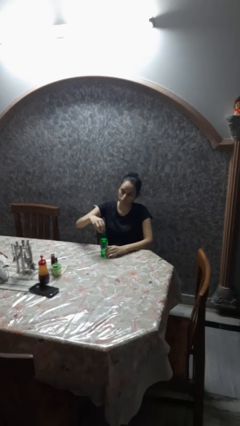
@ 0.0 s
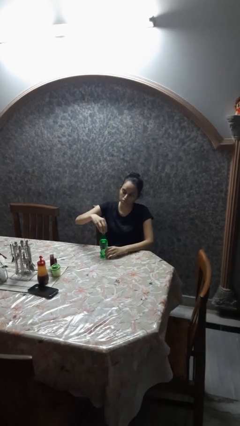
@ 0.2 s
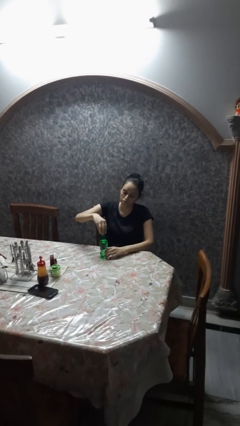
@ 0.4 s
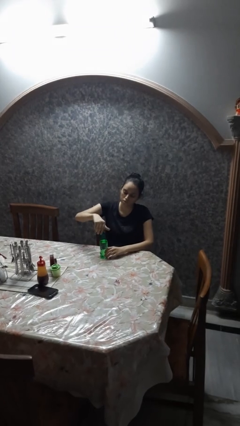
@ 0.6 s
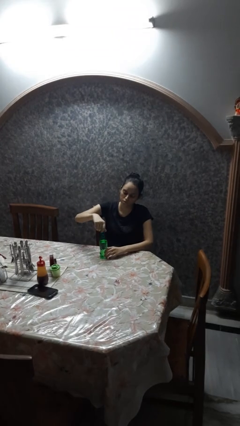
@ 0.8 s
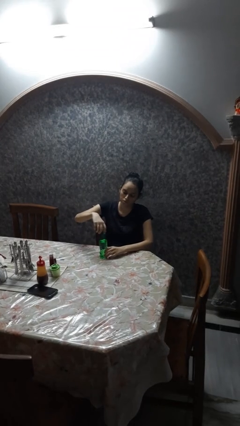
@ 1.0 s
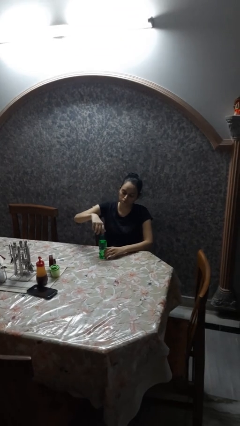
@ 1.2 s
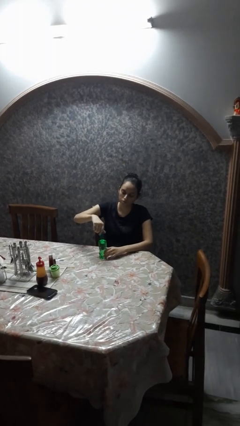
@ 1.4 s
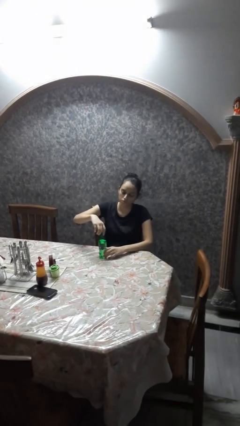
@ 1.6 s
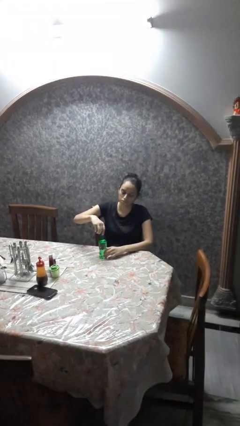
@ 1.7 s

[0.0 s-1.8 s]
person screws lid to bottle

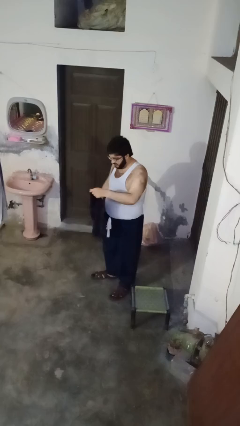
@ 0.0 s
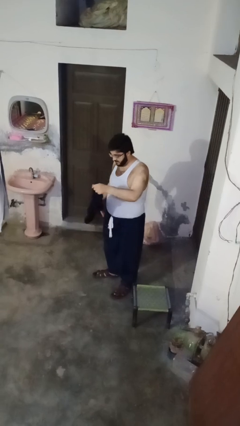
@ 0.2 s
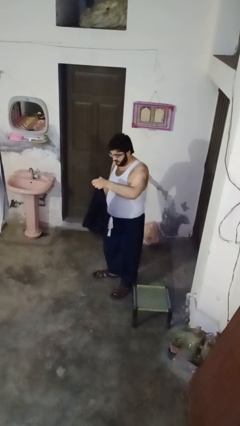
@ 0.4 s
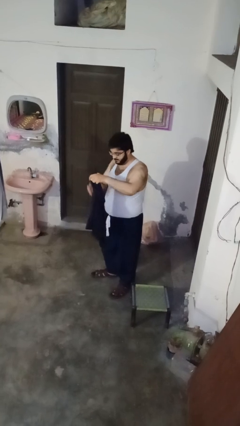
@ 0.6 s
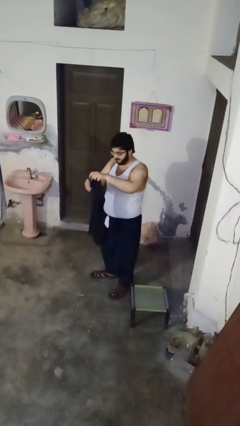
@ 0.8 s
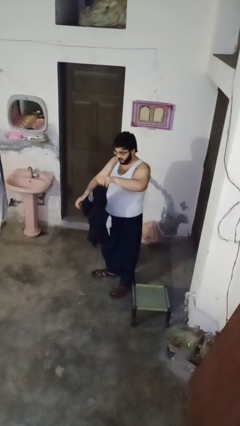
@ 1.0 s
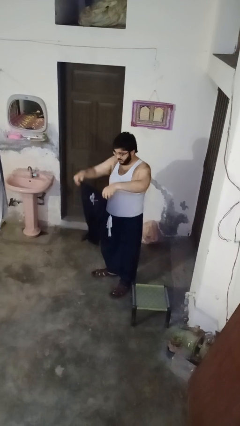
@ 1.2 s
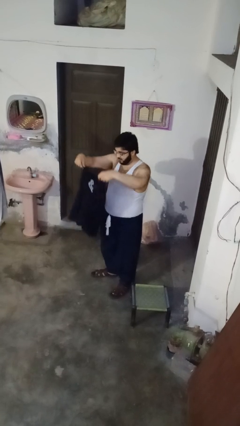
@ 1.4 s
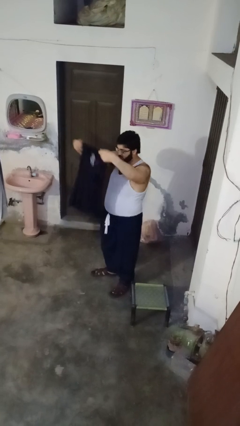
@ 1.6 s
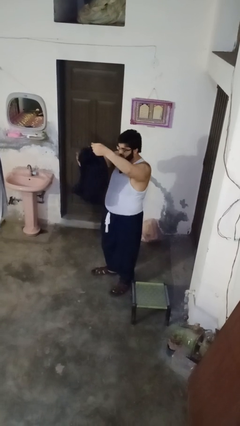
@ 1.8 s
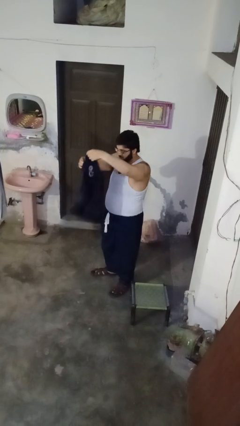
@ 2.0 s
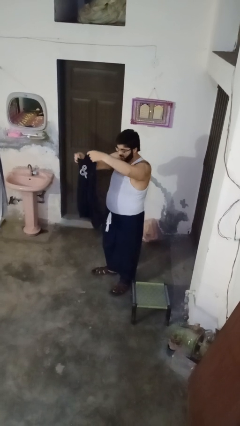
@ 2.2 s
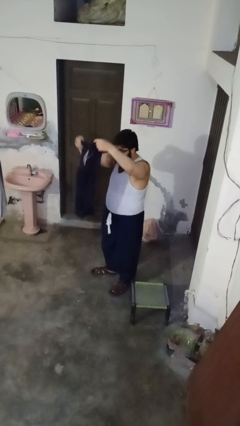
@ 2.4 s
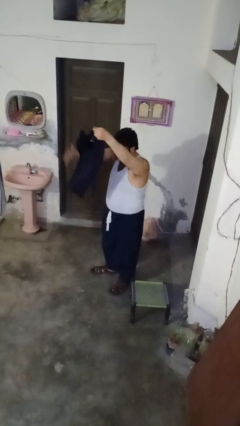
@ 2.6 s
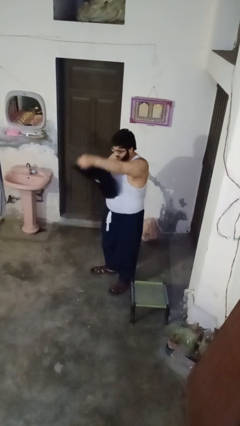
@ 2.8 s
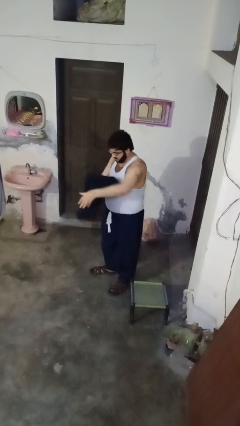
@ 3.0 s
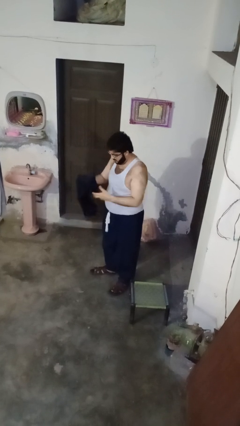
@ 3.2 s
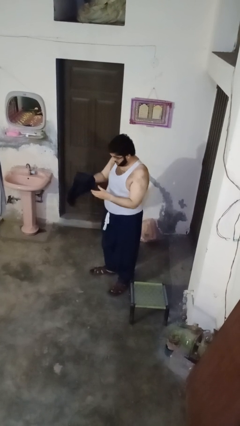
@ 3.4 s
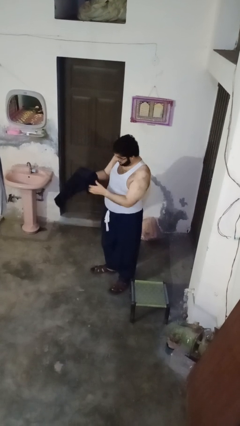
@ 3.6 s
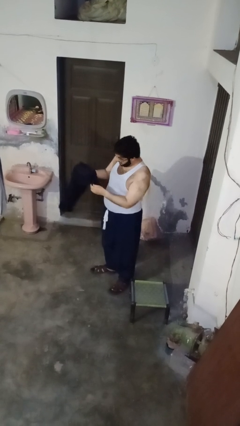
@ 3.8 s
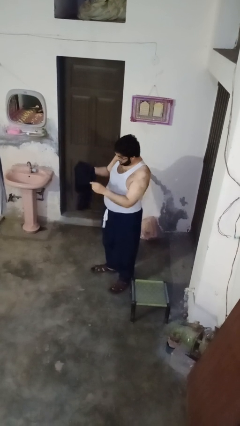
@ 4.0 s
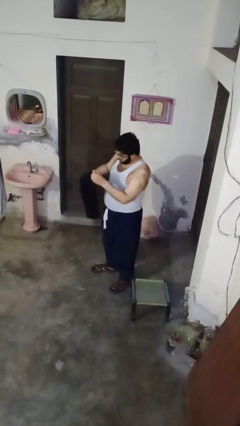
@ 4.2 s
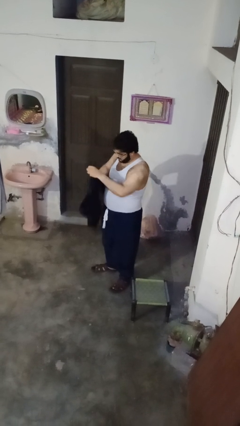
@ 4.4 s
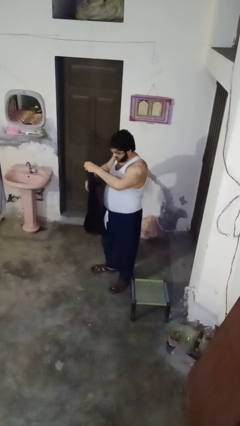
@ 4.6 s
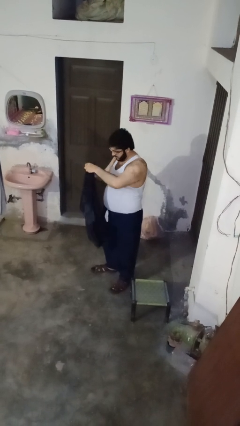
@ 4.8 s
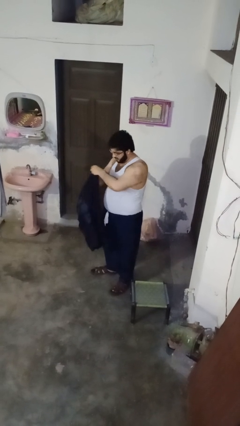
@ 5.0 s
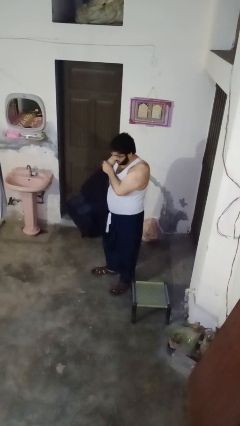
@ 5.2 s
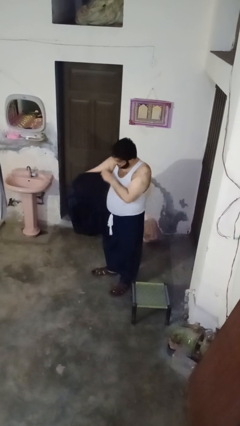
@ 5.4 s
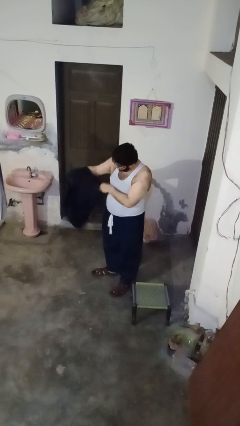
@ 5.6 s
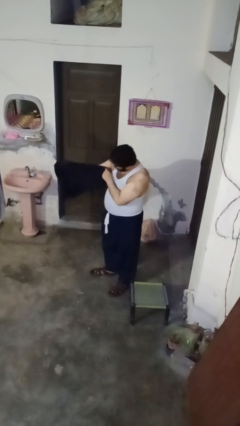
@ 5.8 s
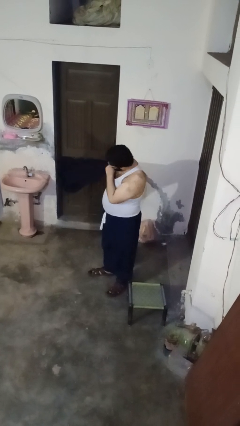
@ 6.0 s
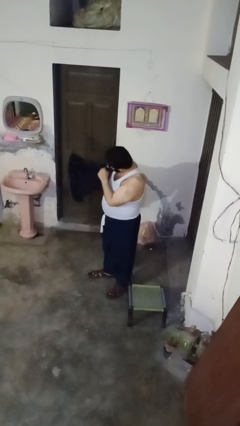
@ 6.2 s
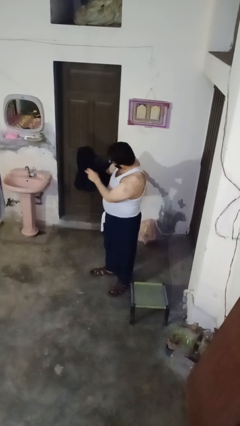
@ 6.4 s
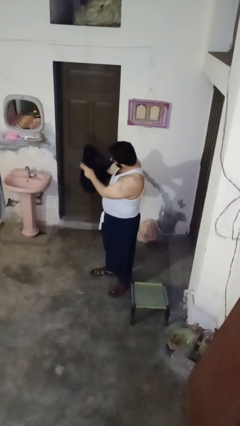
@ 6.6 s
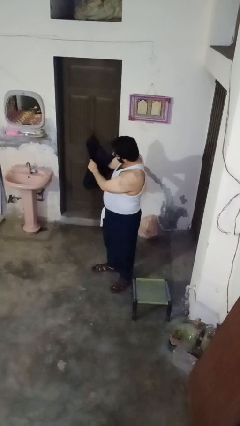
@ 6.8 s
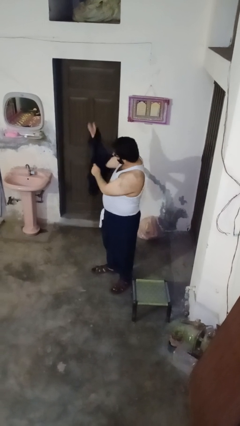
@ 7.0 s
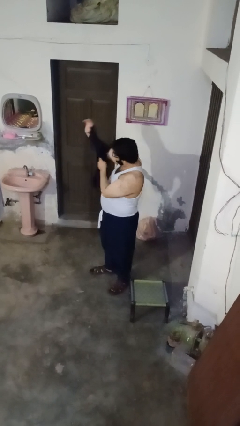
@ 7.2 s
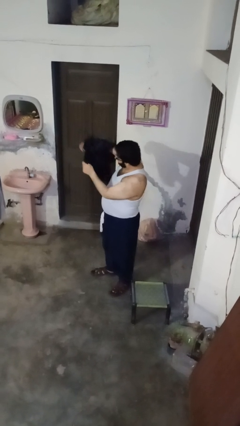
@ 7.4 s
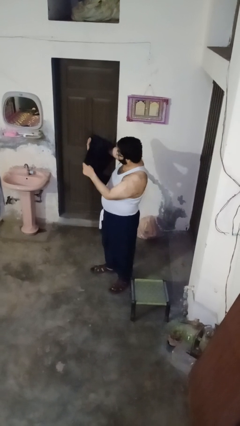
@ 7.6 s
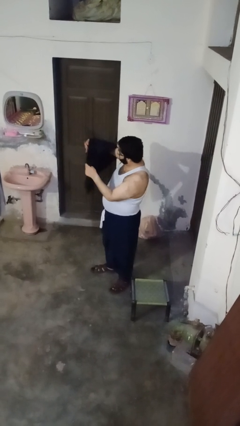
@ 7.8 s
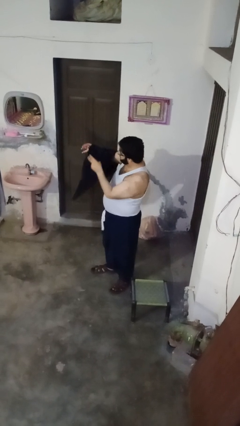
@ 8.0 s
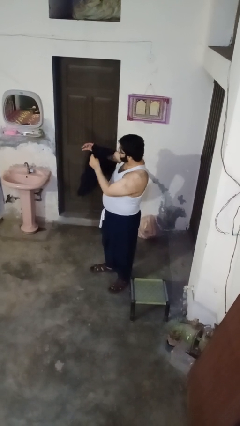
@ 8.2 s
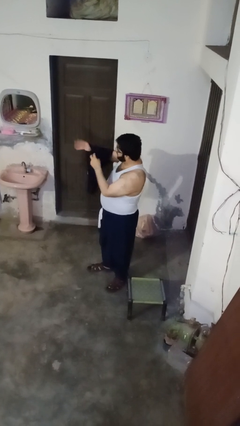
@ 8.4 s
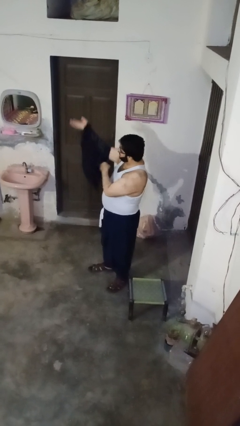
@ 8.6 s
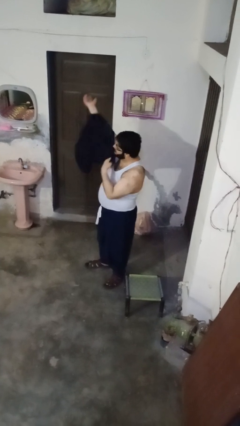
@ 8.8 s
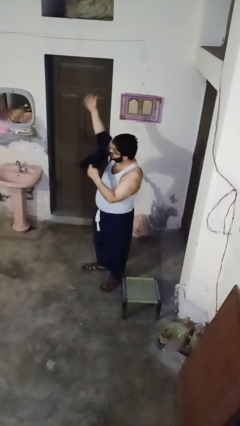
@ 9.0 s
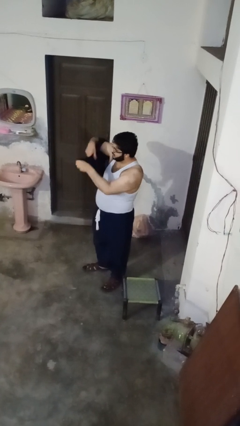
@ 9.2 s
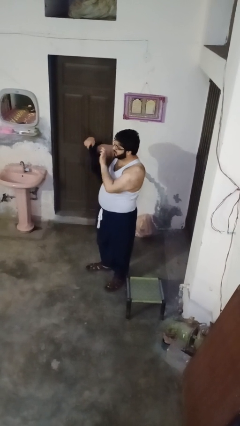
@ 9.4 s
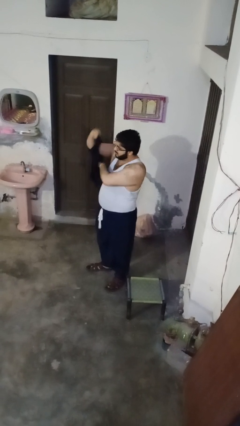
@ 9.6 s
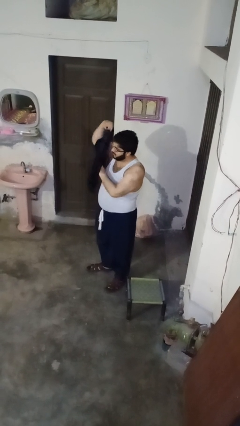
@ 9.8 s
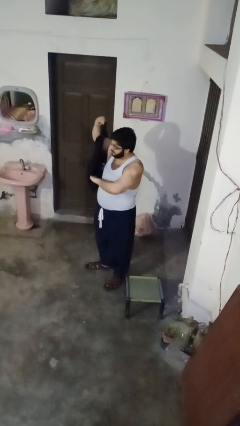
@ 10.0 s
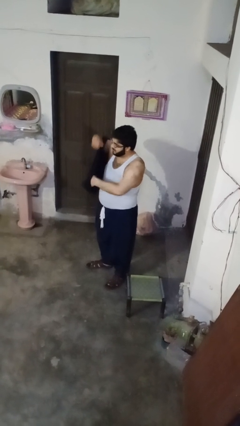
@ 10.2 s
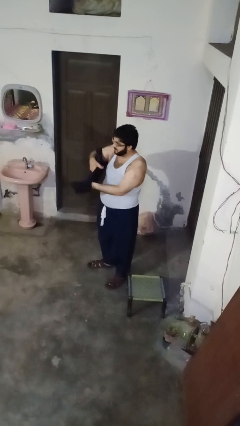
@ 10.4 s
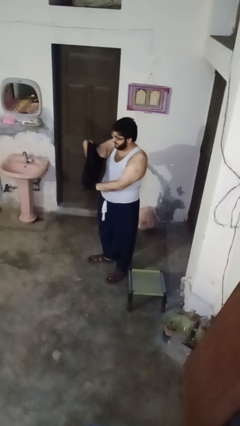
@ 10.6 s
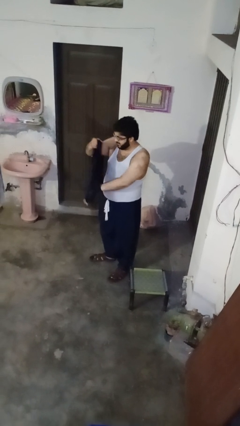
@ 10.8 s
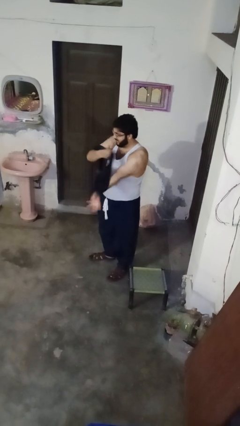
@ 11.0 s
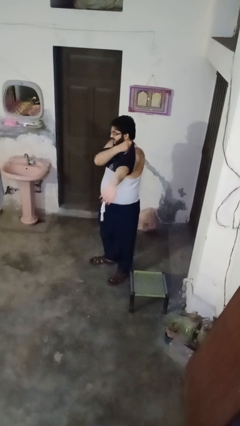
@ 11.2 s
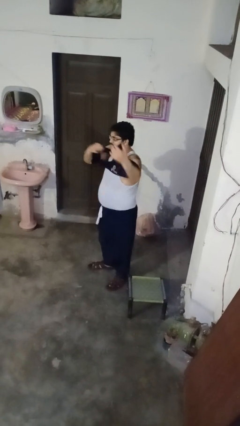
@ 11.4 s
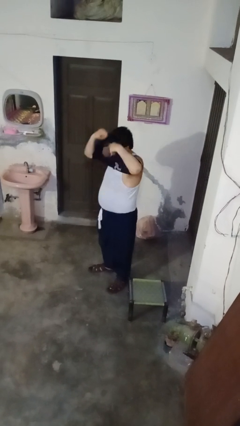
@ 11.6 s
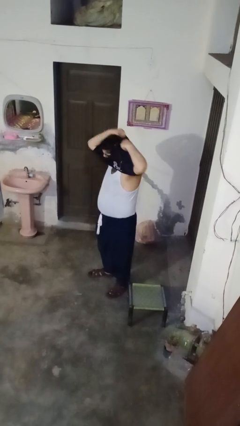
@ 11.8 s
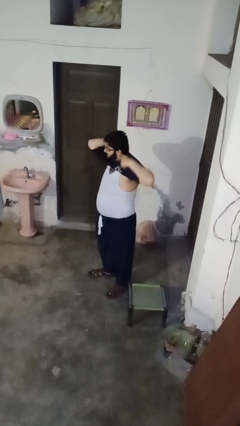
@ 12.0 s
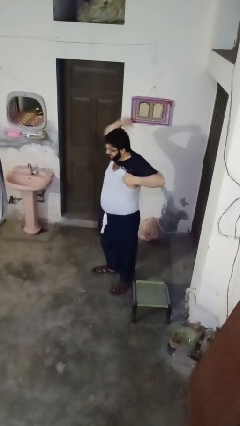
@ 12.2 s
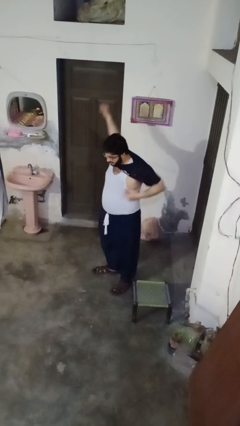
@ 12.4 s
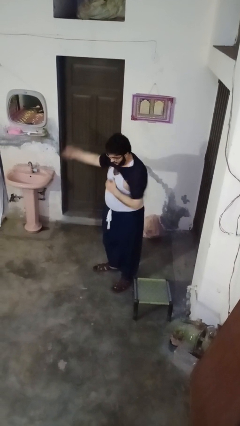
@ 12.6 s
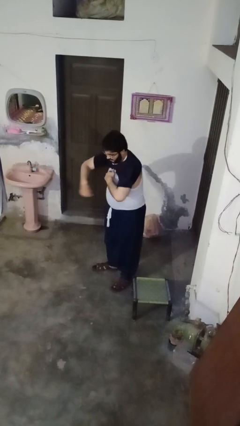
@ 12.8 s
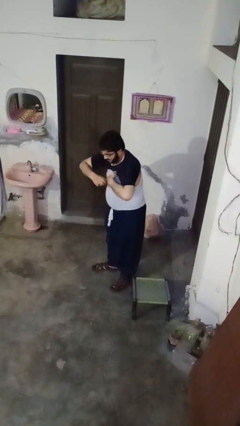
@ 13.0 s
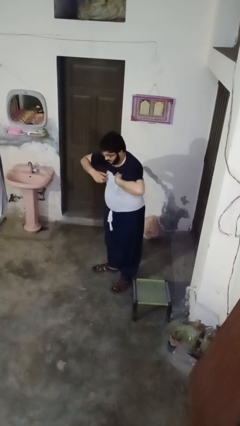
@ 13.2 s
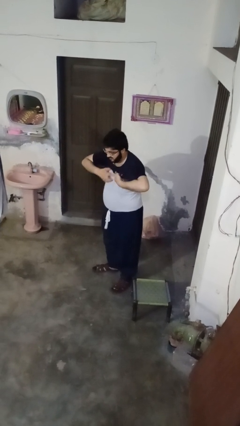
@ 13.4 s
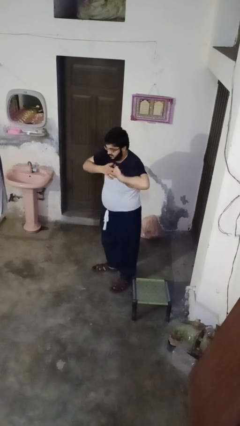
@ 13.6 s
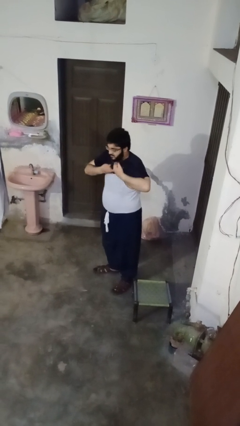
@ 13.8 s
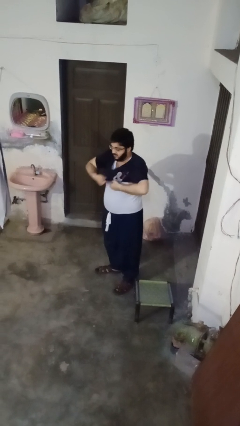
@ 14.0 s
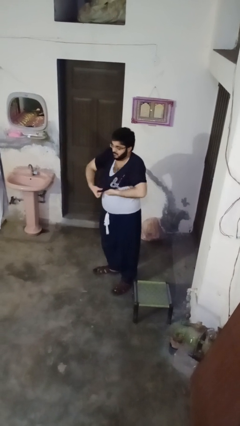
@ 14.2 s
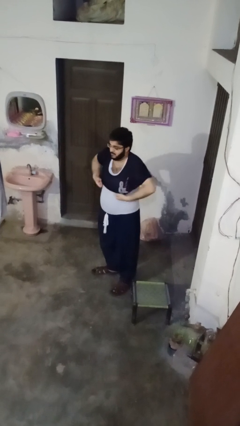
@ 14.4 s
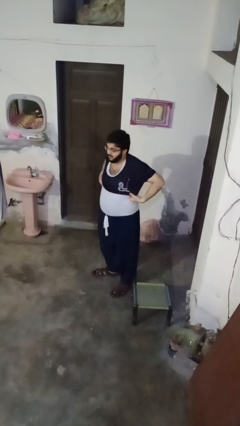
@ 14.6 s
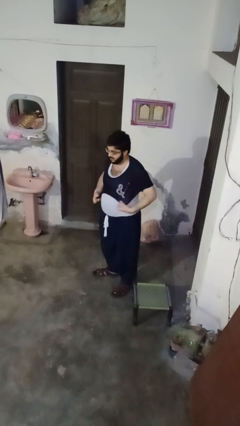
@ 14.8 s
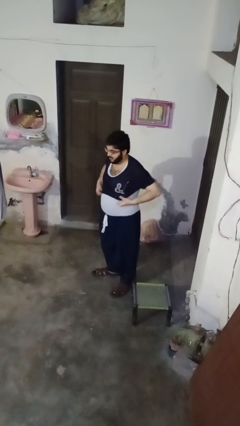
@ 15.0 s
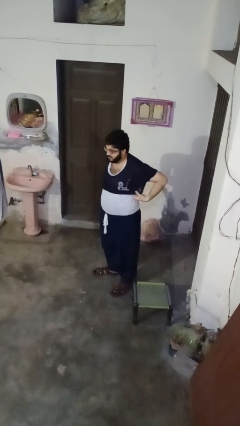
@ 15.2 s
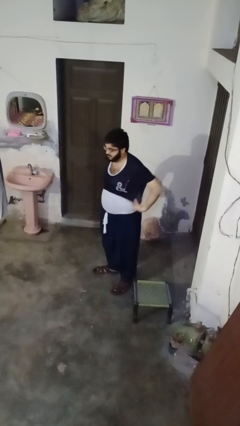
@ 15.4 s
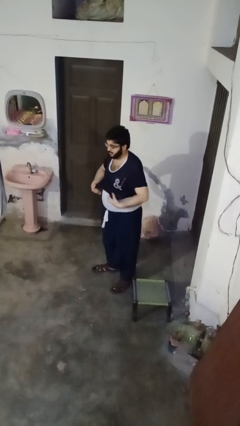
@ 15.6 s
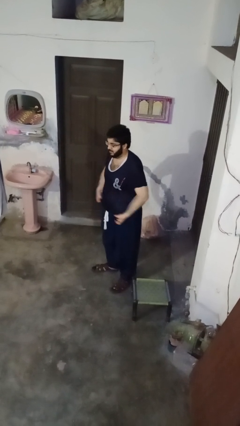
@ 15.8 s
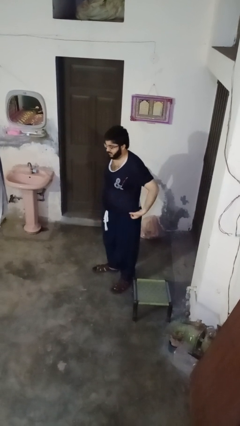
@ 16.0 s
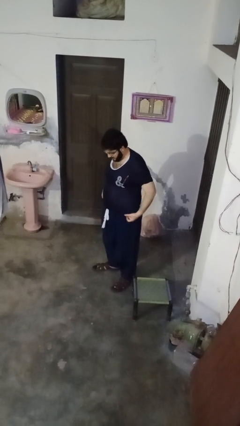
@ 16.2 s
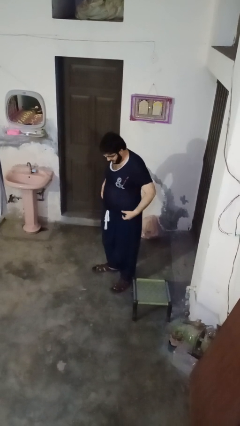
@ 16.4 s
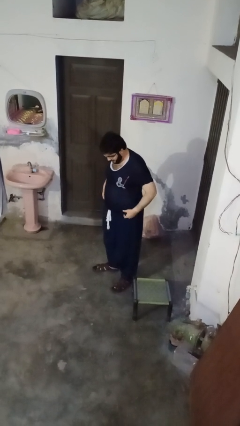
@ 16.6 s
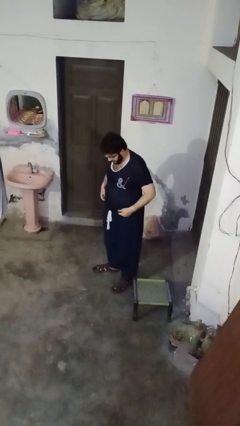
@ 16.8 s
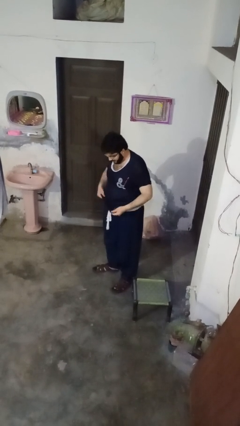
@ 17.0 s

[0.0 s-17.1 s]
person puts on shirt
